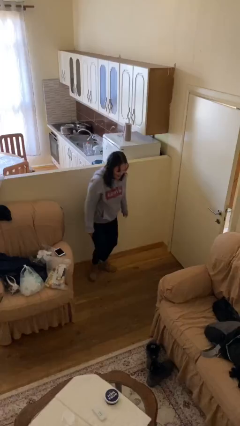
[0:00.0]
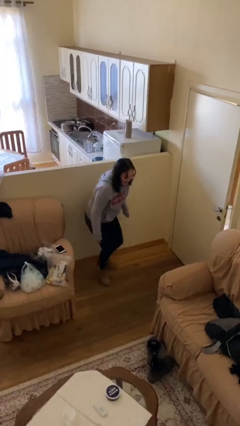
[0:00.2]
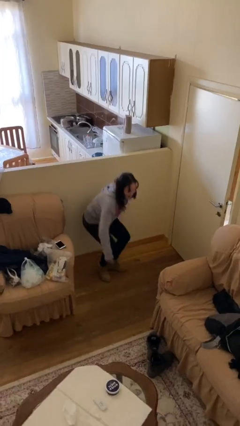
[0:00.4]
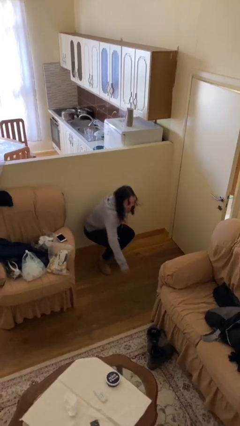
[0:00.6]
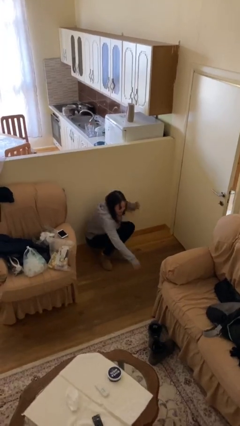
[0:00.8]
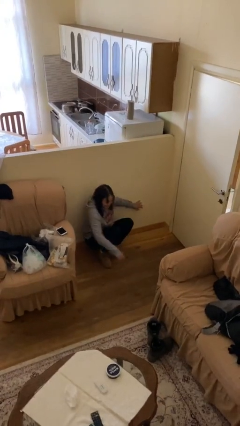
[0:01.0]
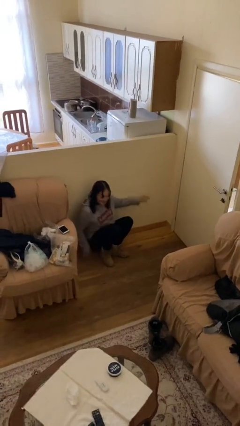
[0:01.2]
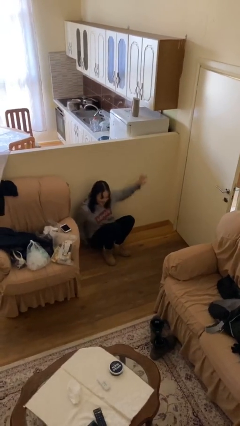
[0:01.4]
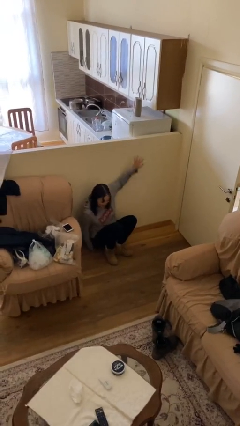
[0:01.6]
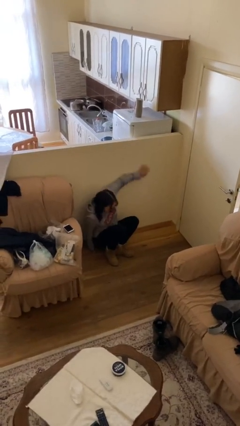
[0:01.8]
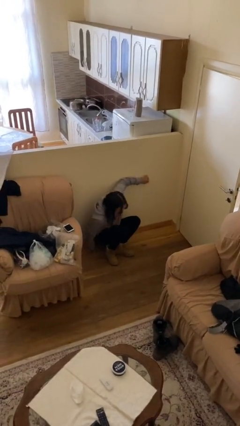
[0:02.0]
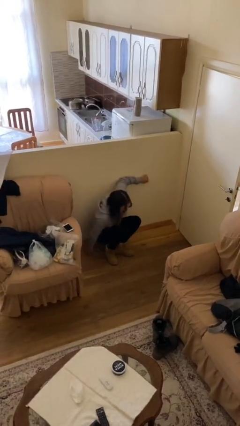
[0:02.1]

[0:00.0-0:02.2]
person sits down

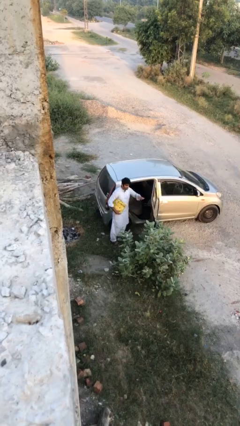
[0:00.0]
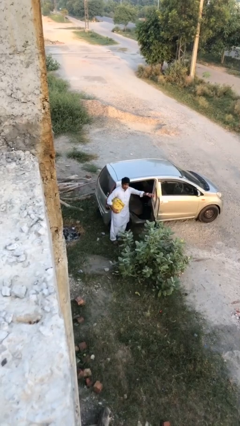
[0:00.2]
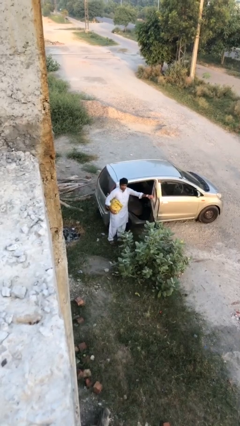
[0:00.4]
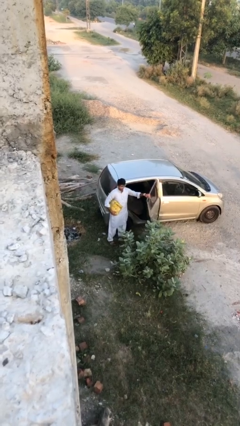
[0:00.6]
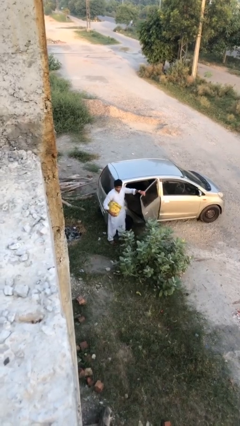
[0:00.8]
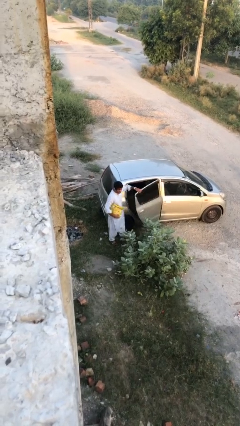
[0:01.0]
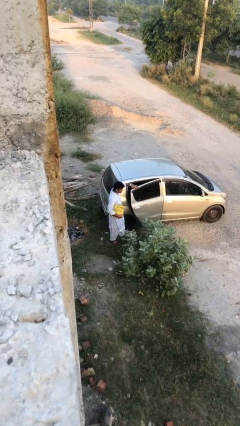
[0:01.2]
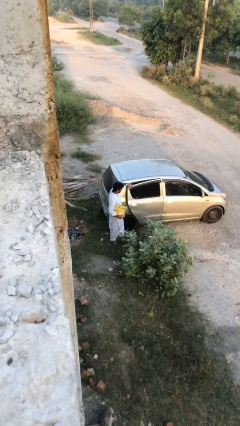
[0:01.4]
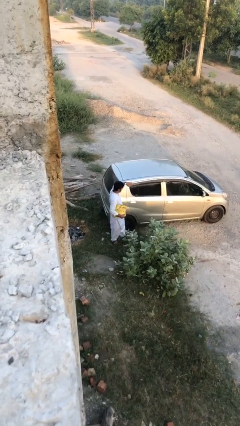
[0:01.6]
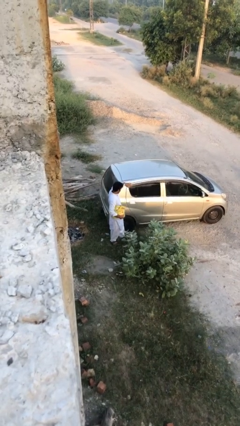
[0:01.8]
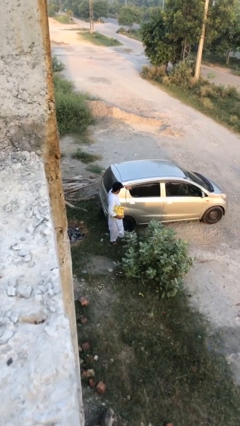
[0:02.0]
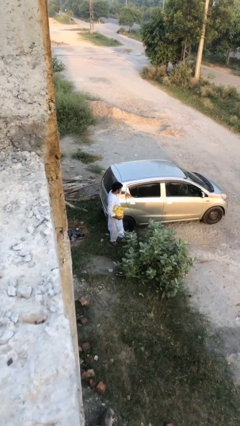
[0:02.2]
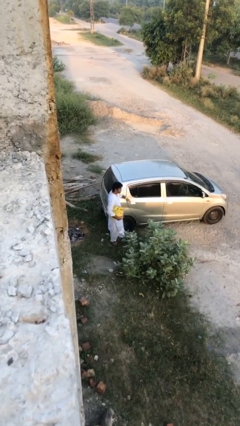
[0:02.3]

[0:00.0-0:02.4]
person closes car door

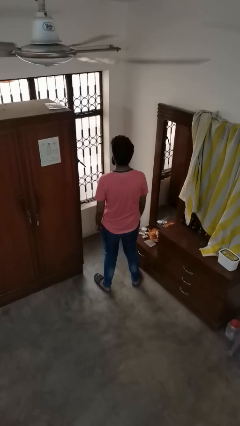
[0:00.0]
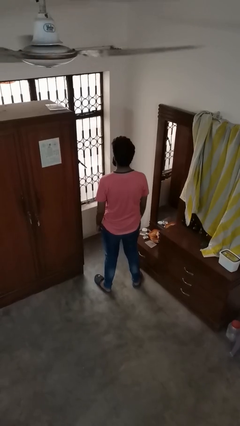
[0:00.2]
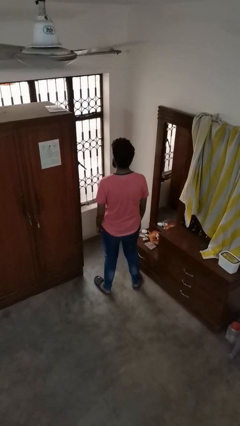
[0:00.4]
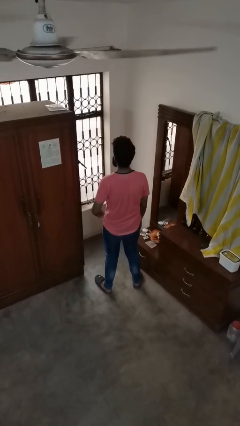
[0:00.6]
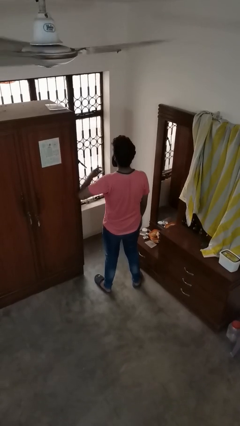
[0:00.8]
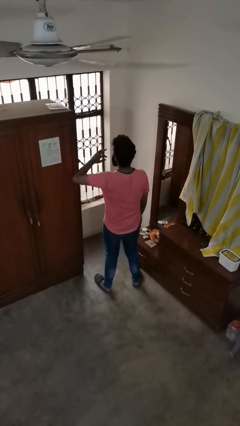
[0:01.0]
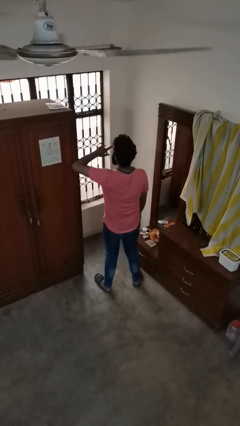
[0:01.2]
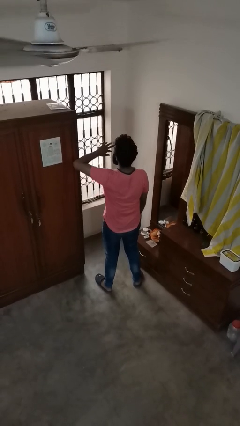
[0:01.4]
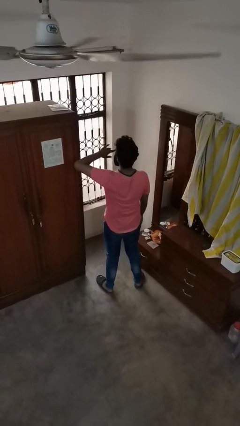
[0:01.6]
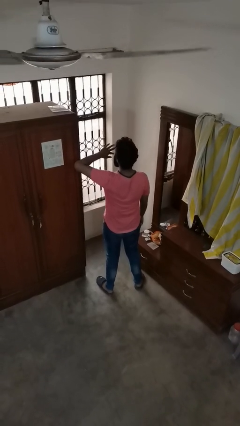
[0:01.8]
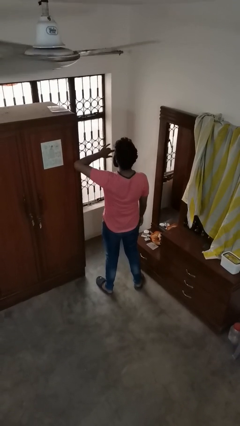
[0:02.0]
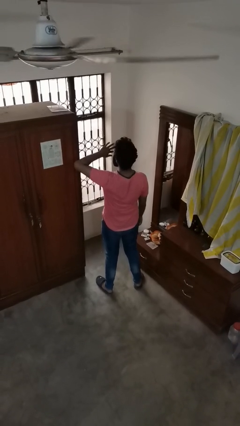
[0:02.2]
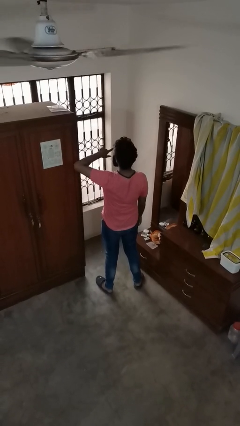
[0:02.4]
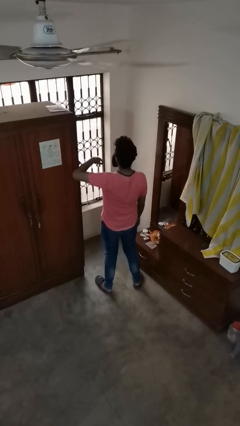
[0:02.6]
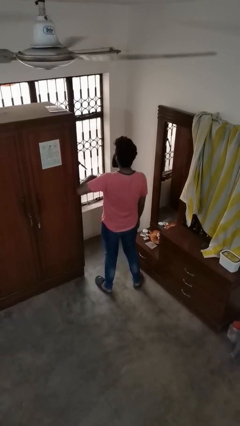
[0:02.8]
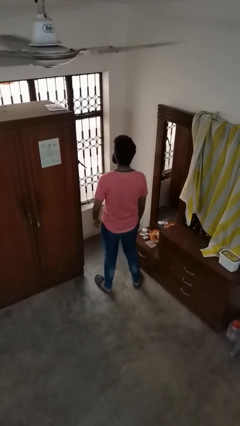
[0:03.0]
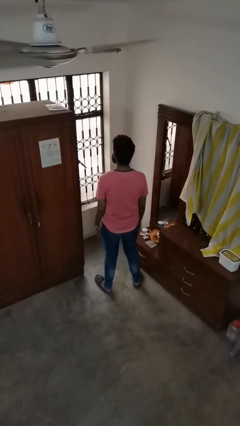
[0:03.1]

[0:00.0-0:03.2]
person yawns

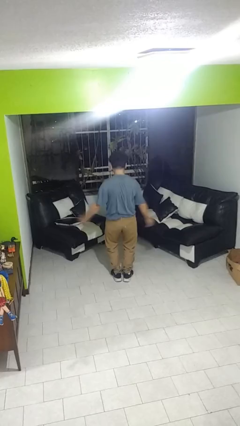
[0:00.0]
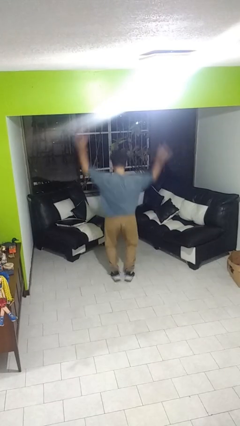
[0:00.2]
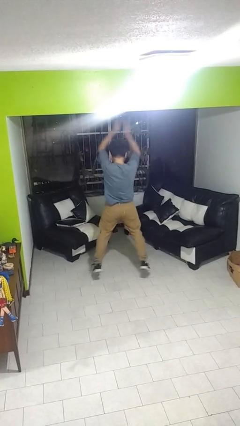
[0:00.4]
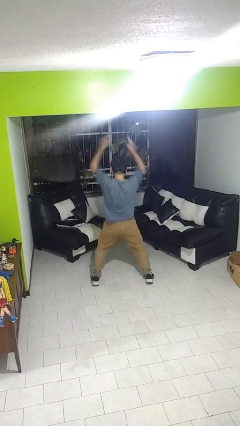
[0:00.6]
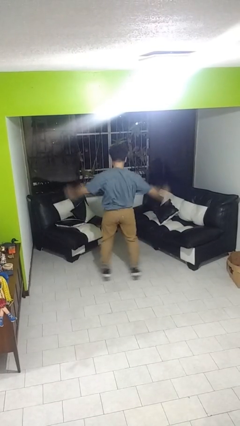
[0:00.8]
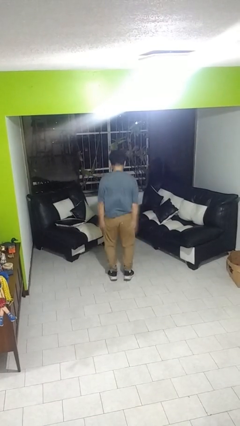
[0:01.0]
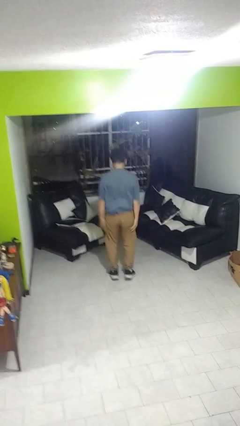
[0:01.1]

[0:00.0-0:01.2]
person exercises with jumping jacks

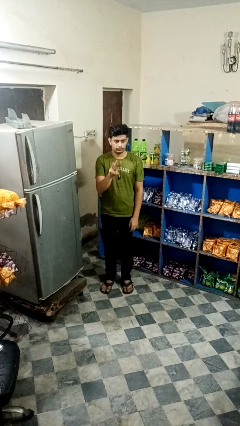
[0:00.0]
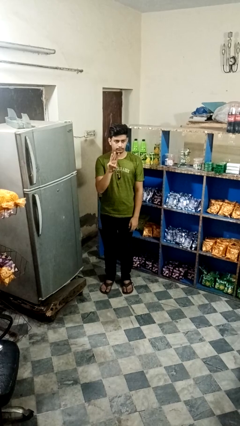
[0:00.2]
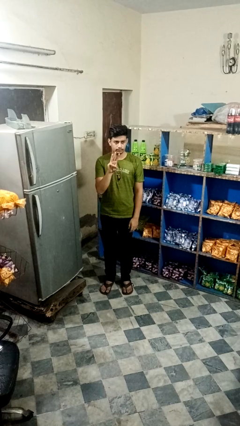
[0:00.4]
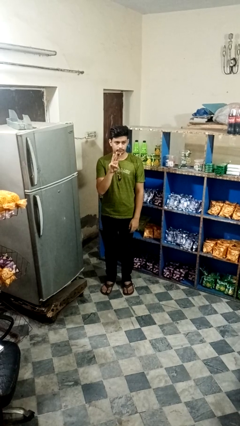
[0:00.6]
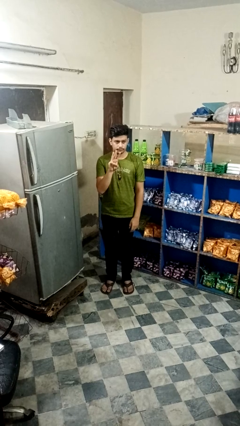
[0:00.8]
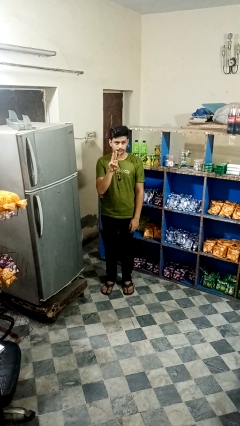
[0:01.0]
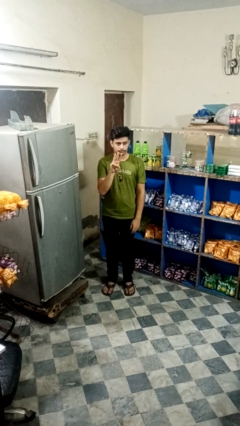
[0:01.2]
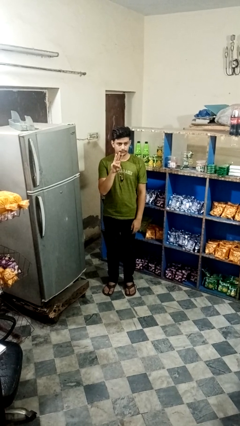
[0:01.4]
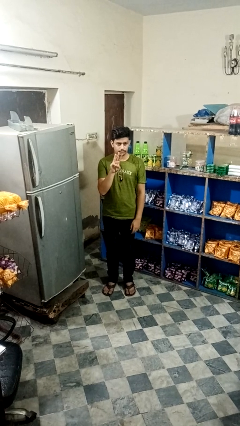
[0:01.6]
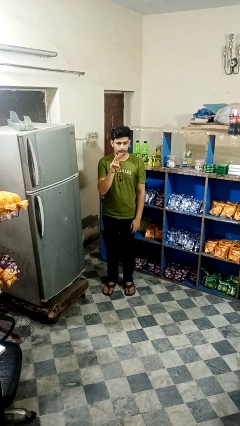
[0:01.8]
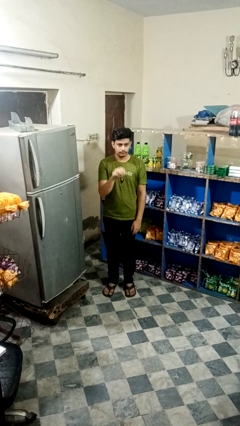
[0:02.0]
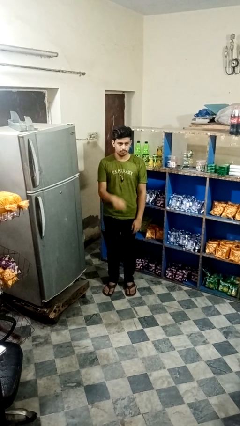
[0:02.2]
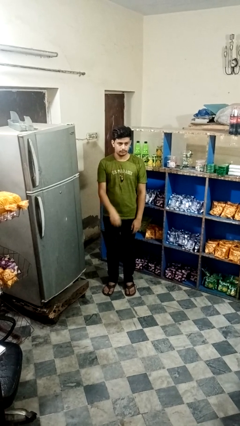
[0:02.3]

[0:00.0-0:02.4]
person gestures number three

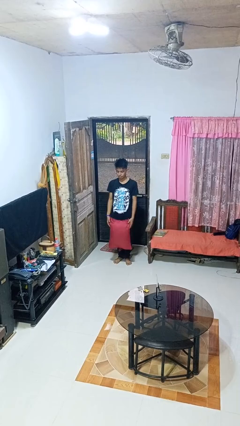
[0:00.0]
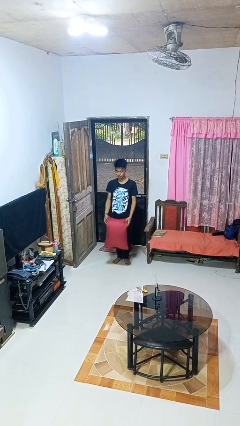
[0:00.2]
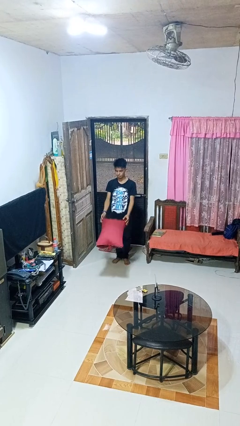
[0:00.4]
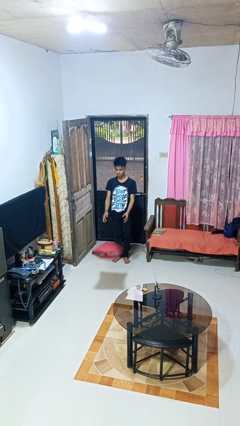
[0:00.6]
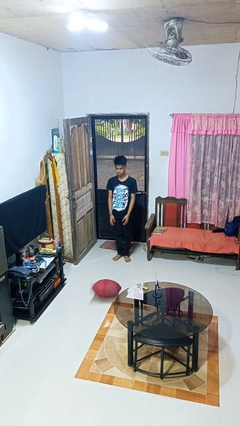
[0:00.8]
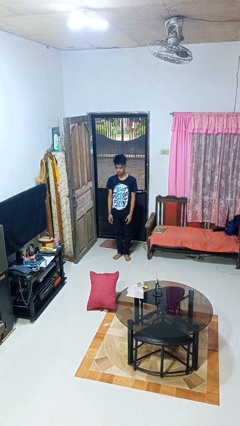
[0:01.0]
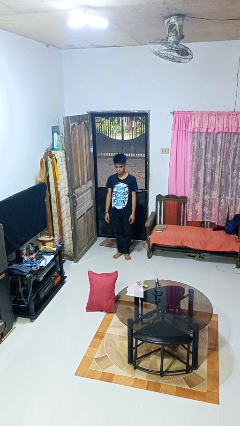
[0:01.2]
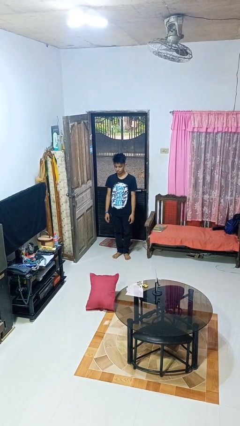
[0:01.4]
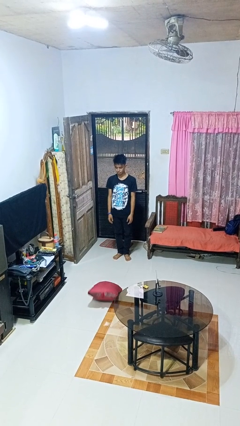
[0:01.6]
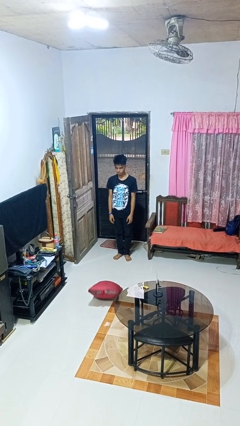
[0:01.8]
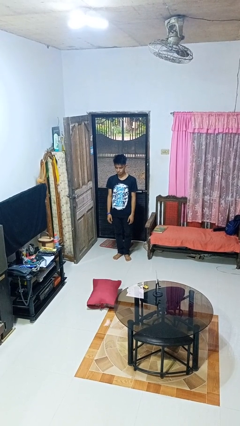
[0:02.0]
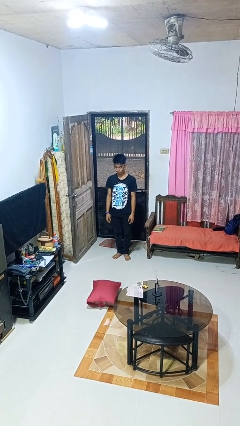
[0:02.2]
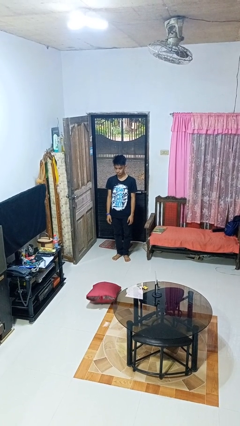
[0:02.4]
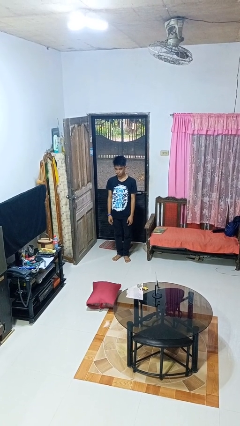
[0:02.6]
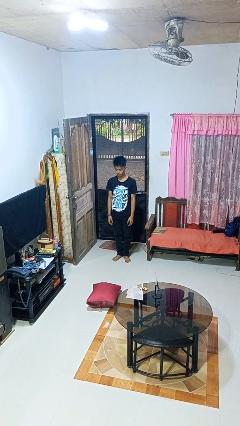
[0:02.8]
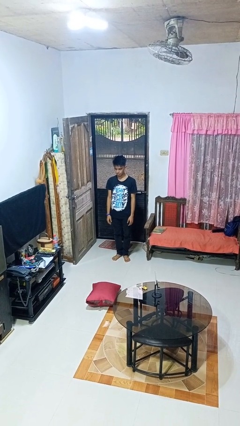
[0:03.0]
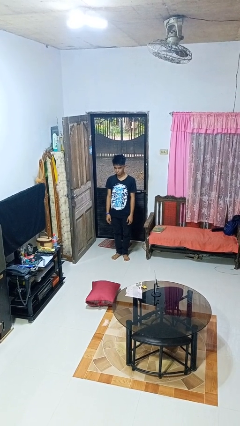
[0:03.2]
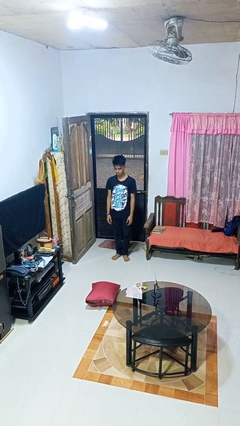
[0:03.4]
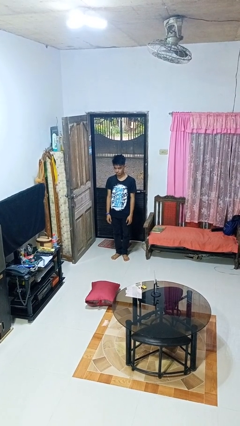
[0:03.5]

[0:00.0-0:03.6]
person throws object to ground

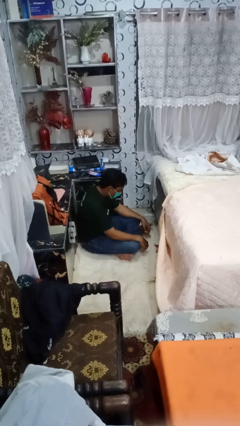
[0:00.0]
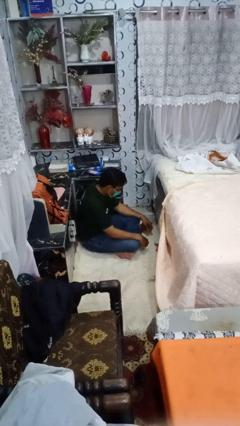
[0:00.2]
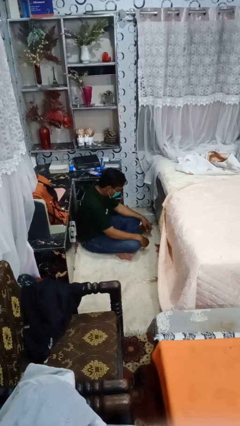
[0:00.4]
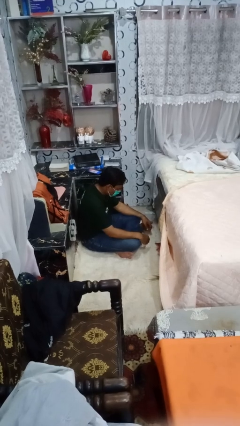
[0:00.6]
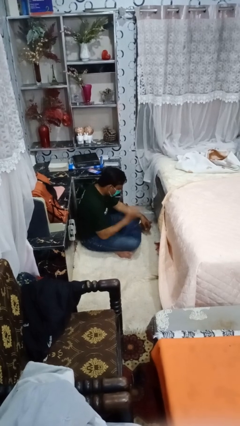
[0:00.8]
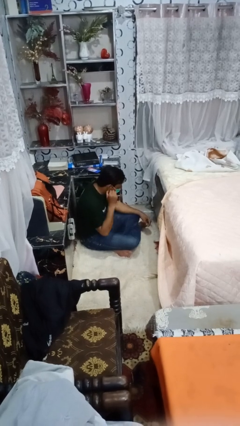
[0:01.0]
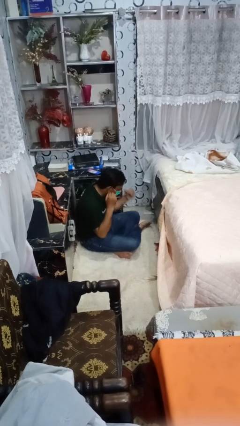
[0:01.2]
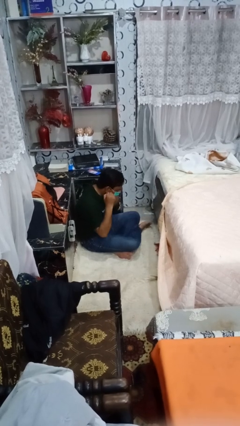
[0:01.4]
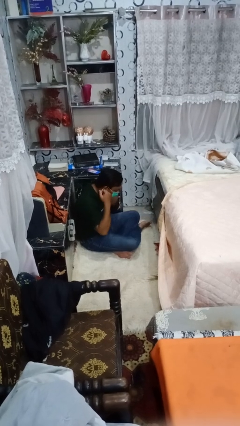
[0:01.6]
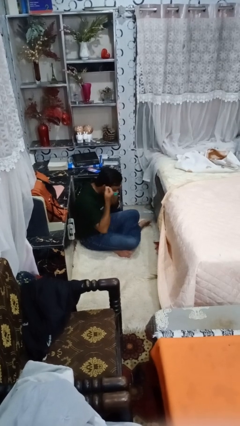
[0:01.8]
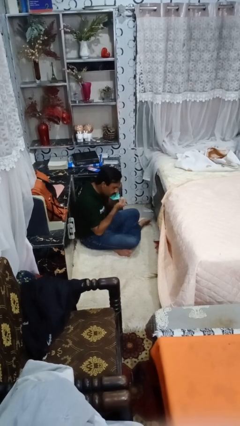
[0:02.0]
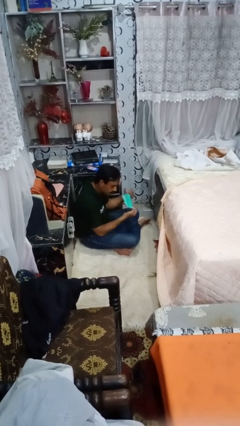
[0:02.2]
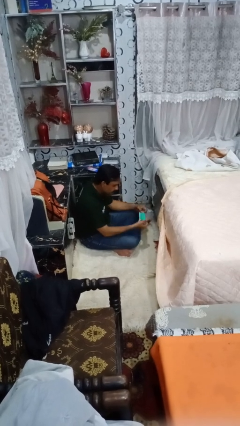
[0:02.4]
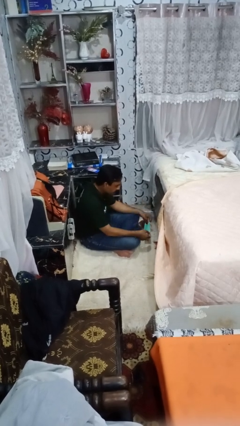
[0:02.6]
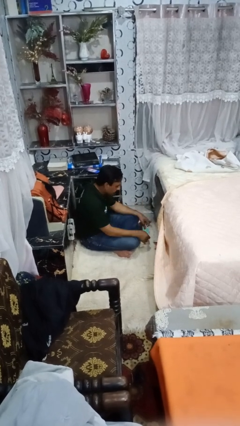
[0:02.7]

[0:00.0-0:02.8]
person takes off facemask
